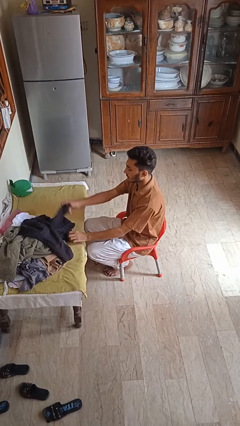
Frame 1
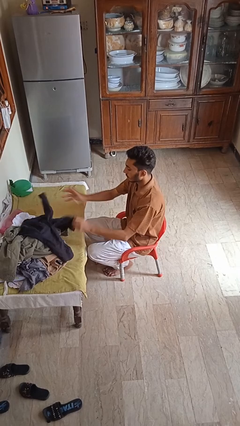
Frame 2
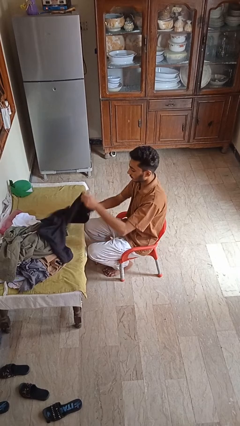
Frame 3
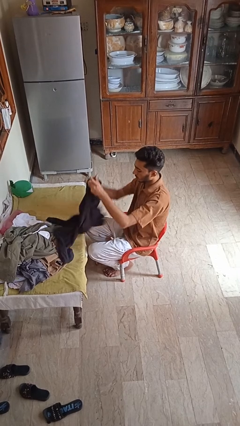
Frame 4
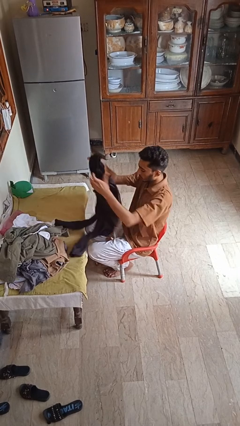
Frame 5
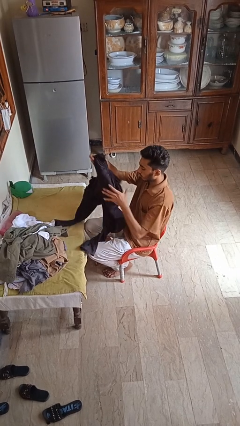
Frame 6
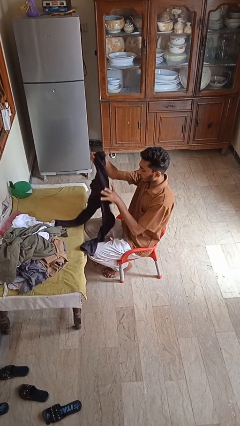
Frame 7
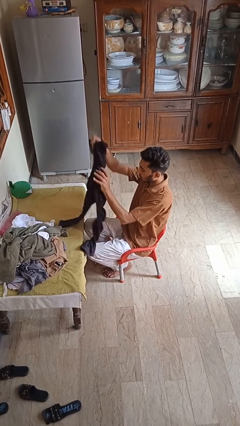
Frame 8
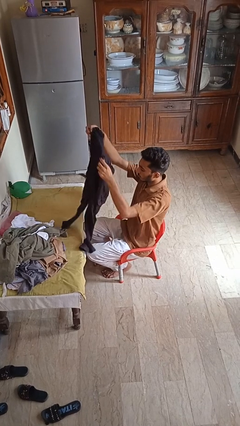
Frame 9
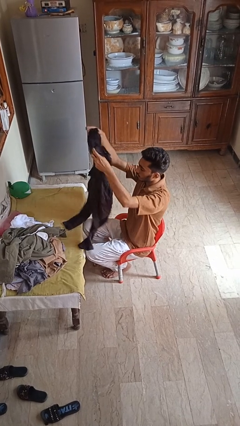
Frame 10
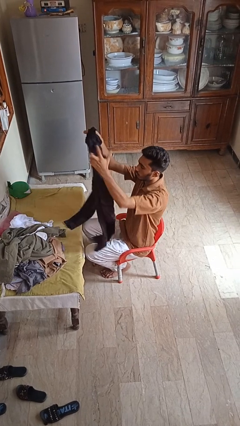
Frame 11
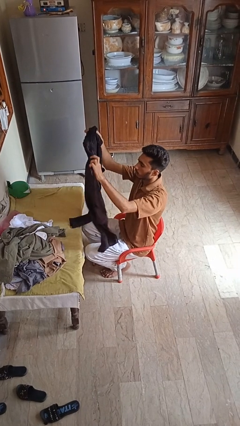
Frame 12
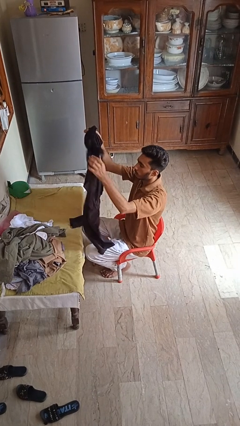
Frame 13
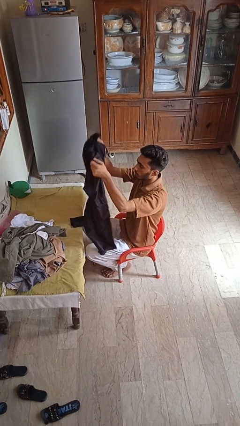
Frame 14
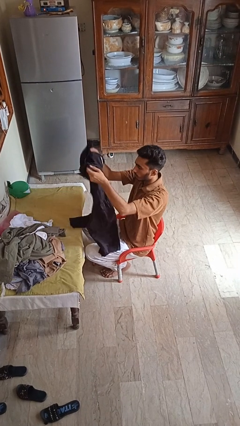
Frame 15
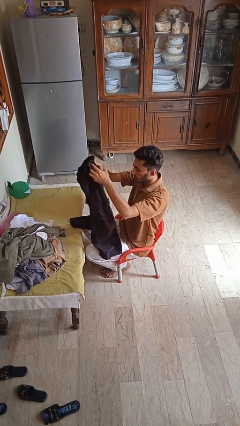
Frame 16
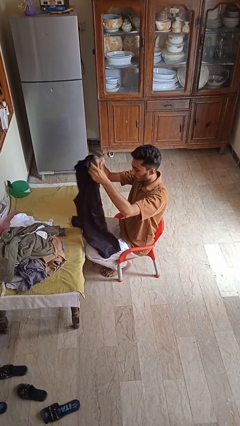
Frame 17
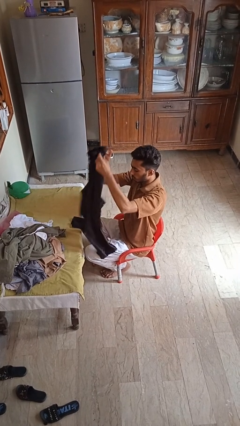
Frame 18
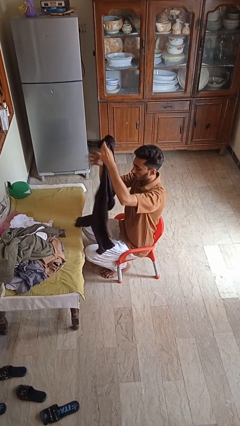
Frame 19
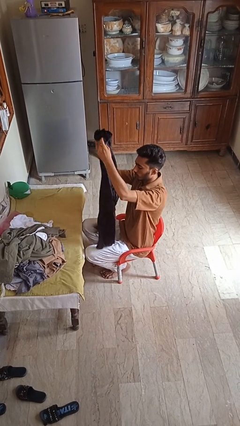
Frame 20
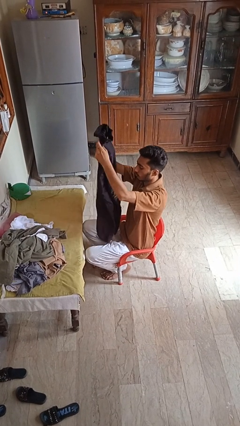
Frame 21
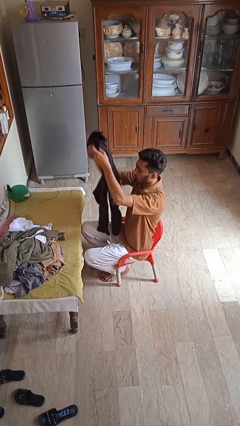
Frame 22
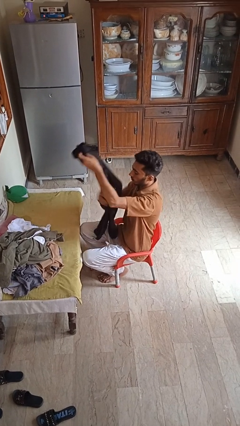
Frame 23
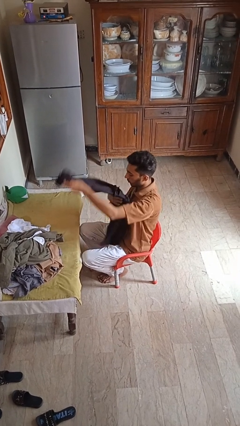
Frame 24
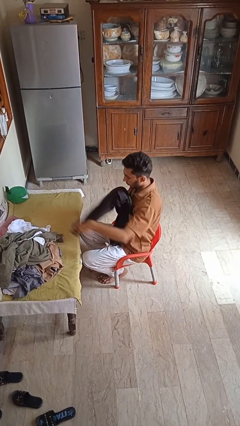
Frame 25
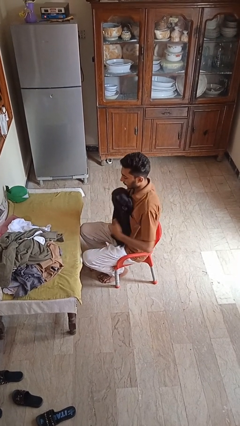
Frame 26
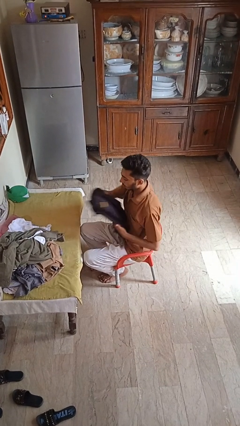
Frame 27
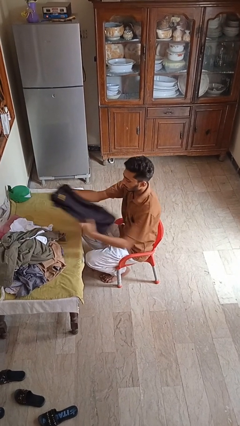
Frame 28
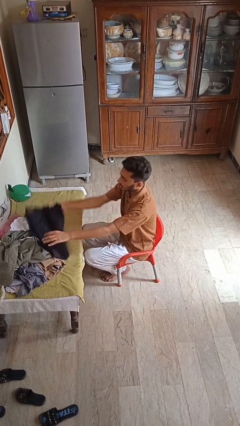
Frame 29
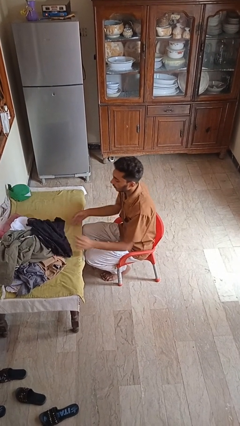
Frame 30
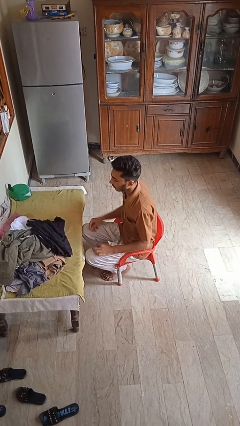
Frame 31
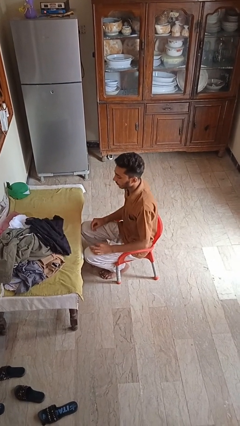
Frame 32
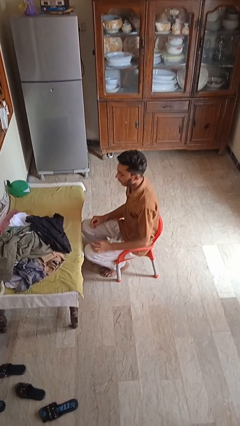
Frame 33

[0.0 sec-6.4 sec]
person folds pants

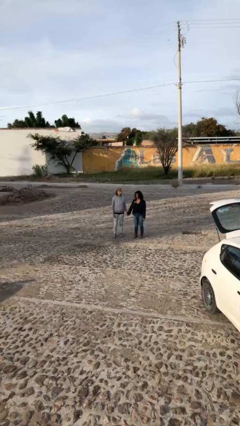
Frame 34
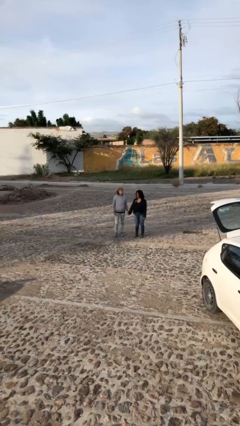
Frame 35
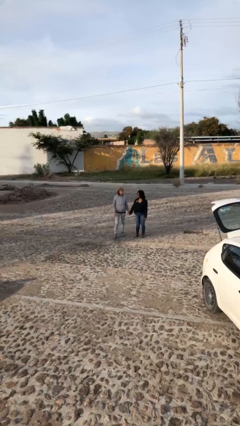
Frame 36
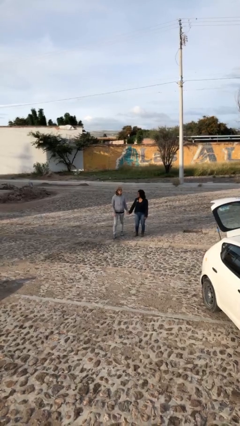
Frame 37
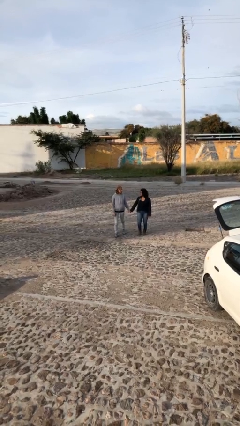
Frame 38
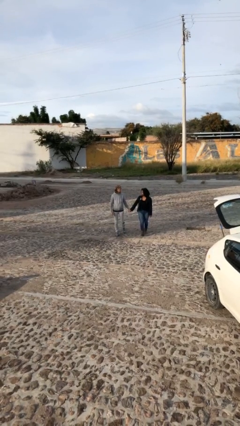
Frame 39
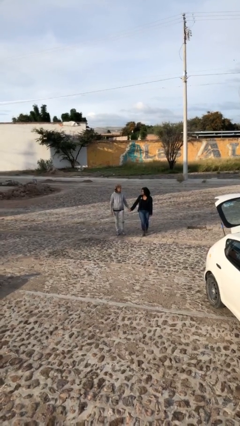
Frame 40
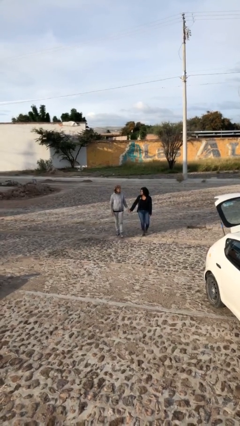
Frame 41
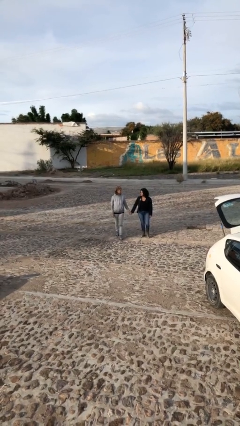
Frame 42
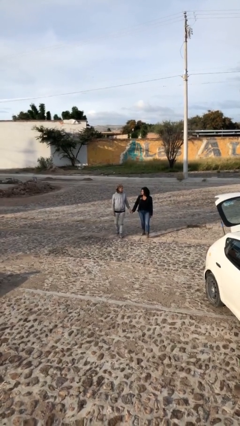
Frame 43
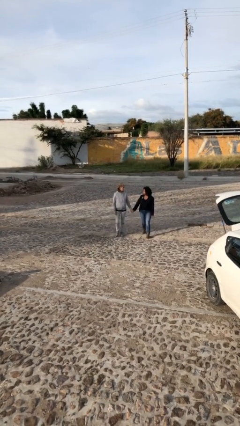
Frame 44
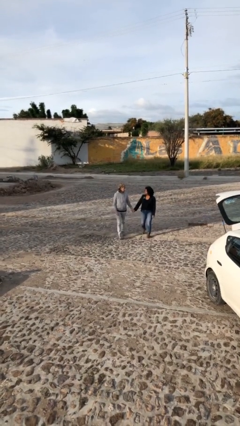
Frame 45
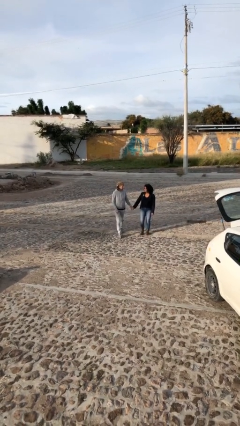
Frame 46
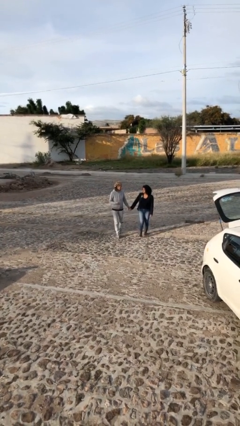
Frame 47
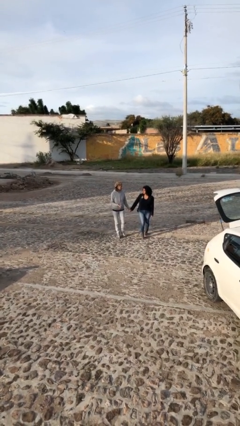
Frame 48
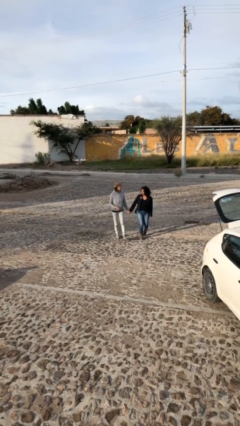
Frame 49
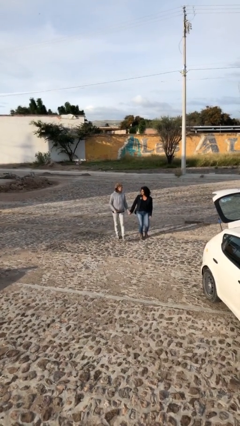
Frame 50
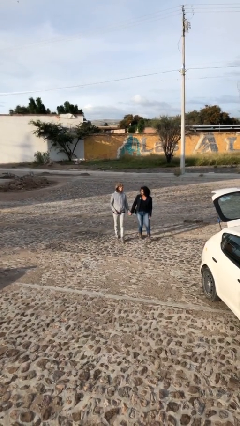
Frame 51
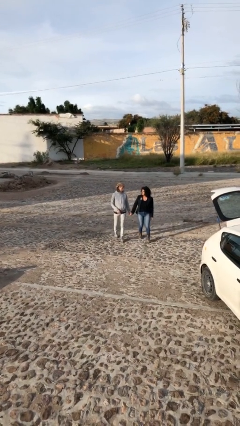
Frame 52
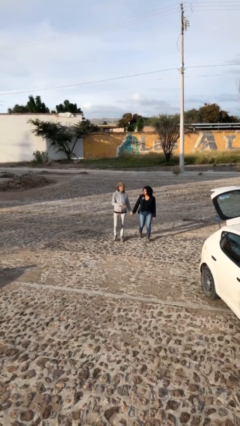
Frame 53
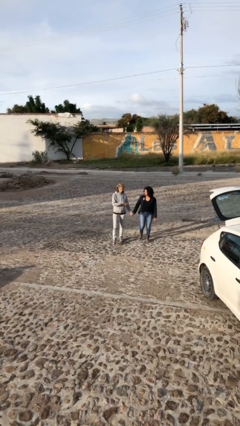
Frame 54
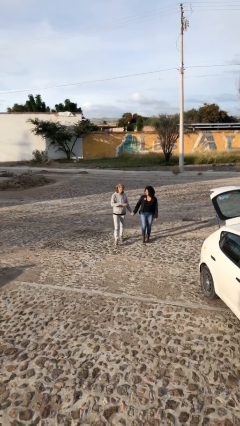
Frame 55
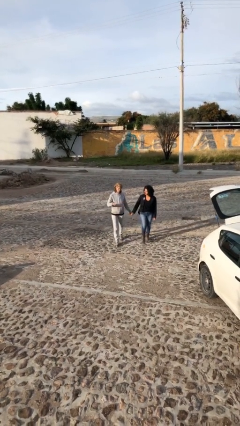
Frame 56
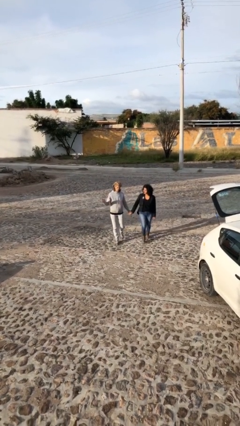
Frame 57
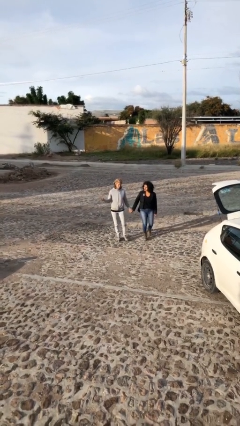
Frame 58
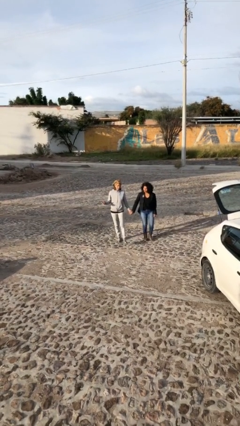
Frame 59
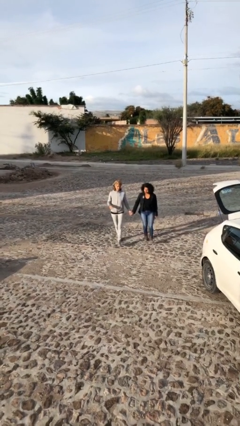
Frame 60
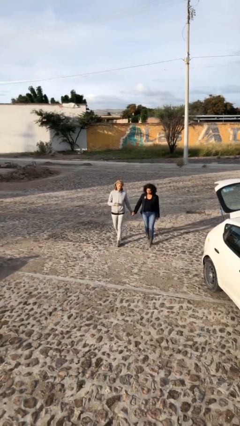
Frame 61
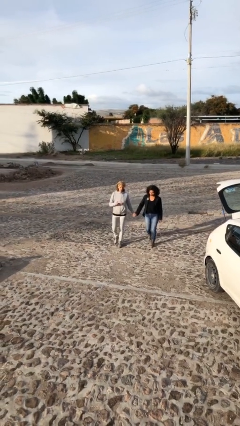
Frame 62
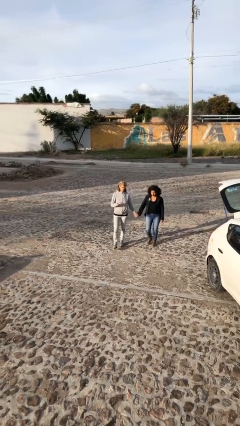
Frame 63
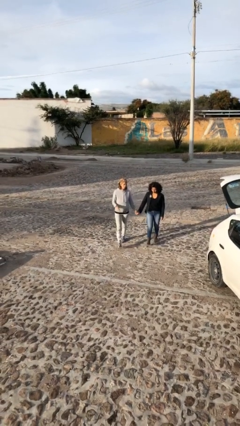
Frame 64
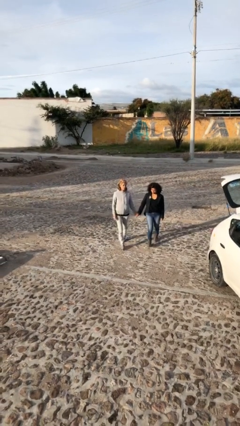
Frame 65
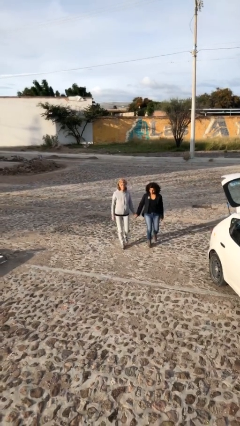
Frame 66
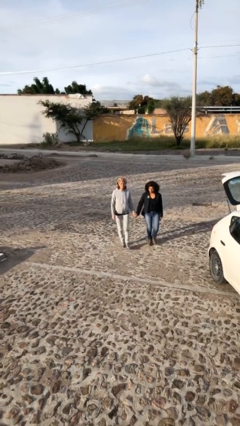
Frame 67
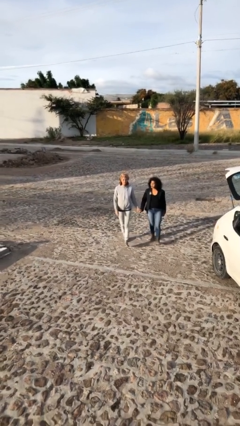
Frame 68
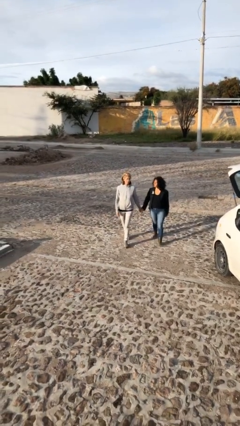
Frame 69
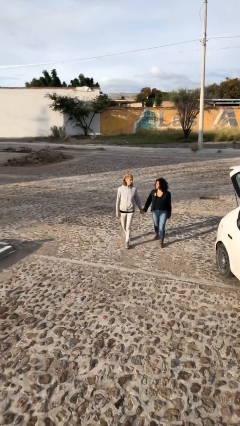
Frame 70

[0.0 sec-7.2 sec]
person holds hand

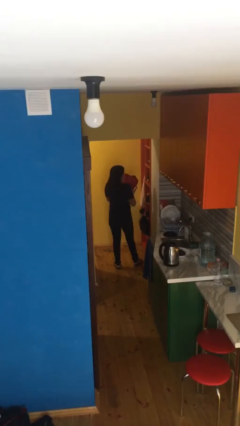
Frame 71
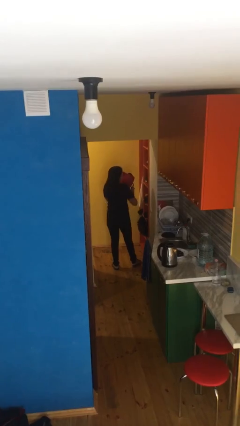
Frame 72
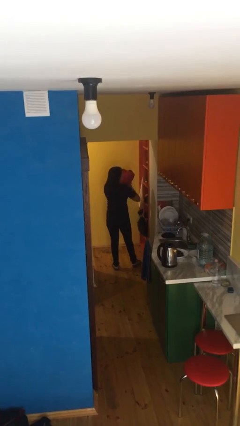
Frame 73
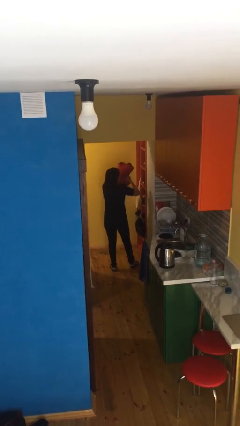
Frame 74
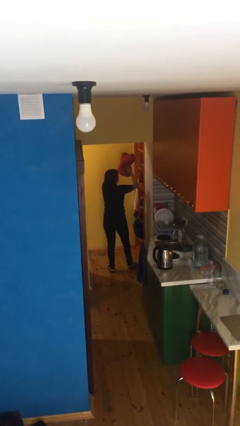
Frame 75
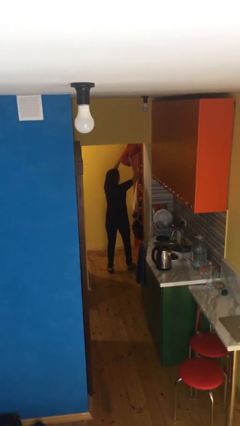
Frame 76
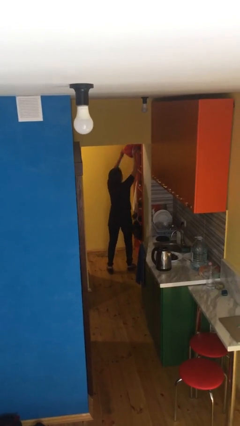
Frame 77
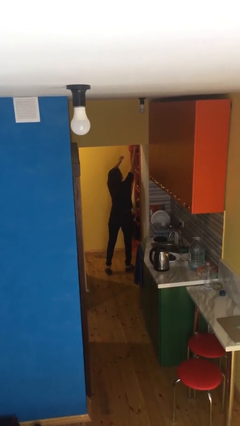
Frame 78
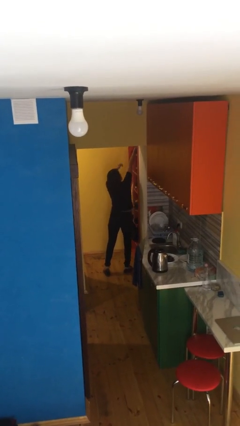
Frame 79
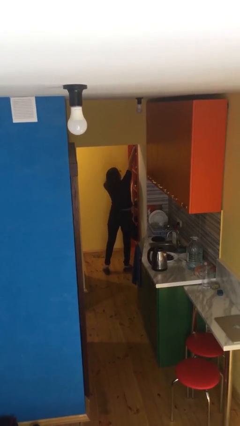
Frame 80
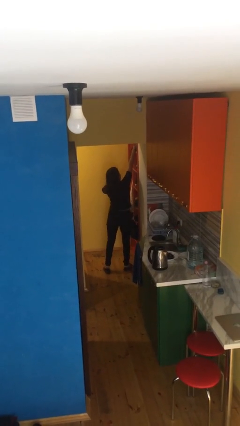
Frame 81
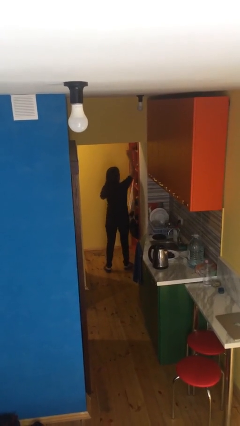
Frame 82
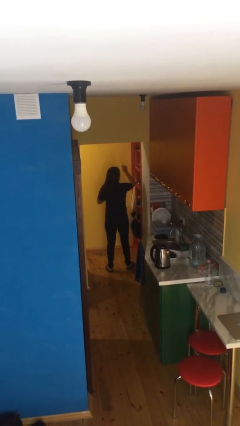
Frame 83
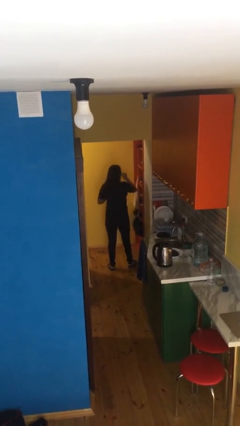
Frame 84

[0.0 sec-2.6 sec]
person puts down object on shelf

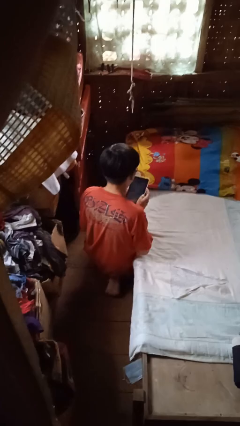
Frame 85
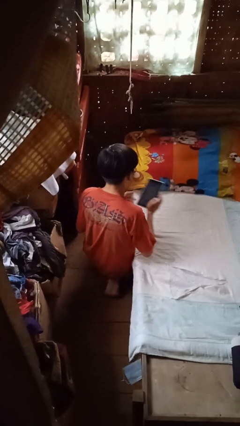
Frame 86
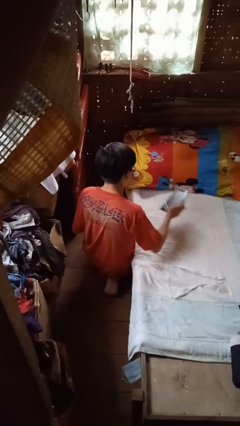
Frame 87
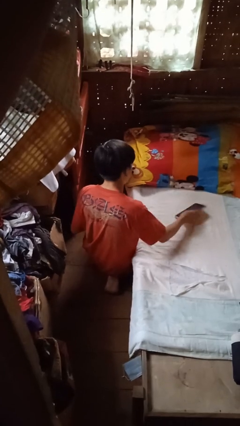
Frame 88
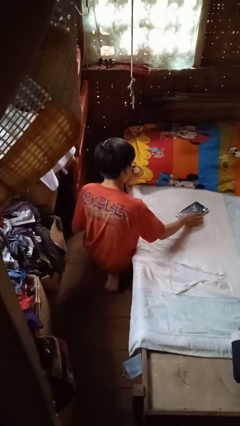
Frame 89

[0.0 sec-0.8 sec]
person puts down object on bed

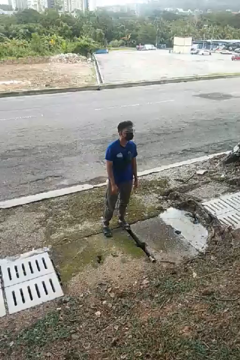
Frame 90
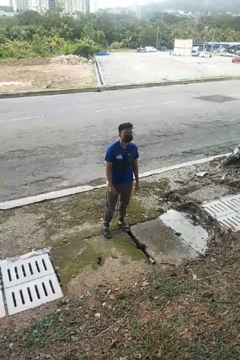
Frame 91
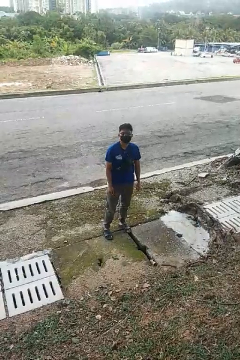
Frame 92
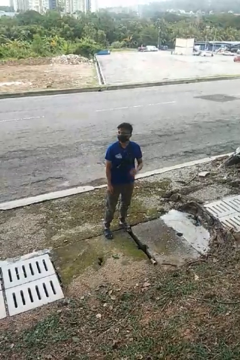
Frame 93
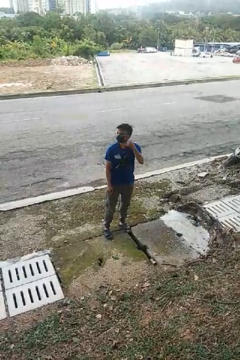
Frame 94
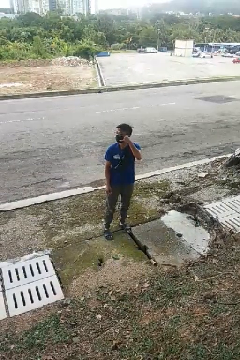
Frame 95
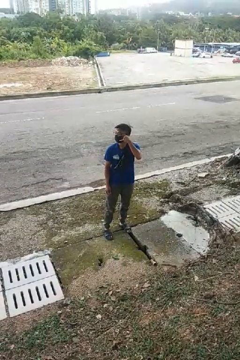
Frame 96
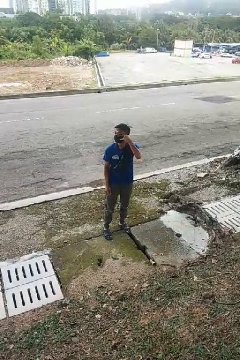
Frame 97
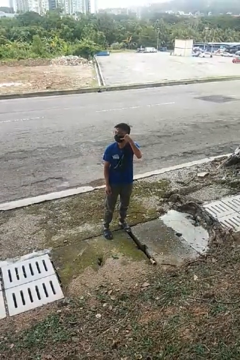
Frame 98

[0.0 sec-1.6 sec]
person gestures call me
